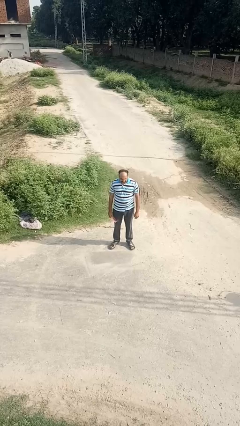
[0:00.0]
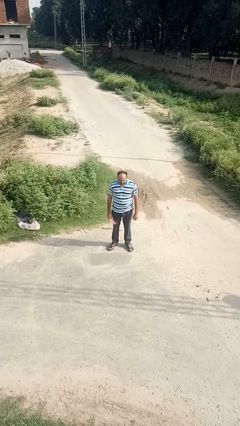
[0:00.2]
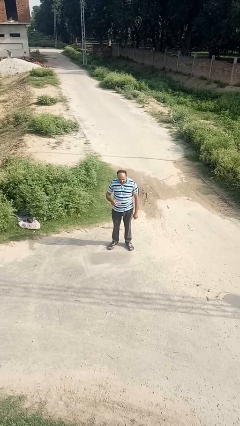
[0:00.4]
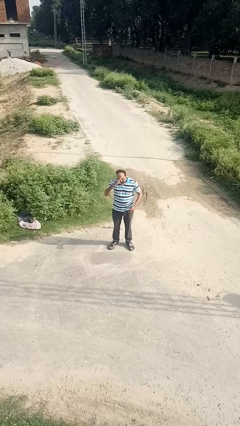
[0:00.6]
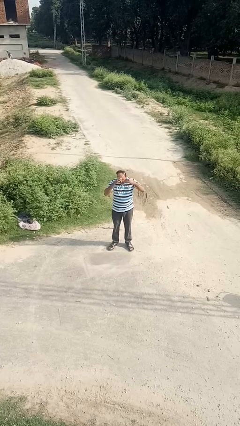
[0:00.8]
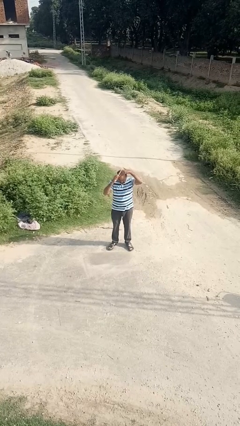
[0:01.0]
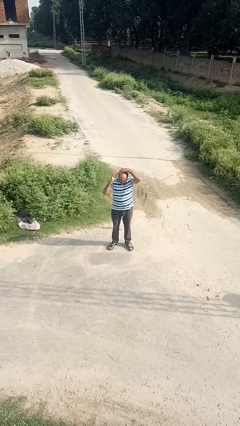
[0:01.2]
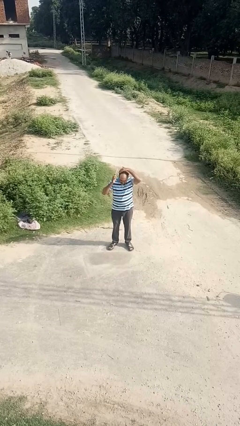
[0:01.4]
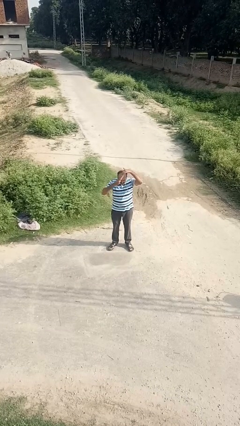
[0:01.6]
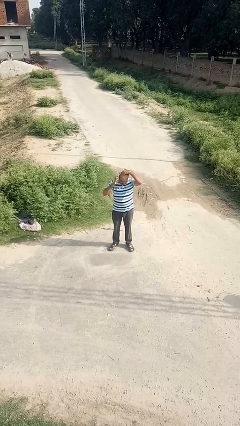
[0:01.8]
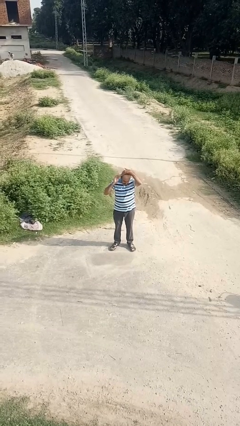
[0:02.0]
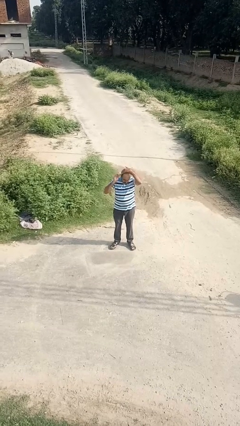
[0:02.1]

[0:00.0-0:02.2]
person brushes hair

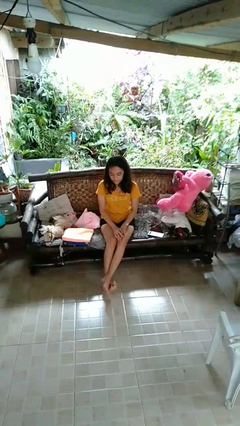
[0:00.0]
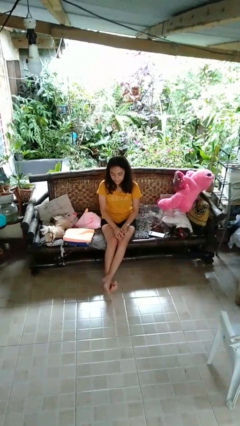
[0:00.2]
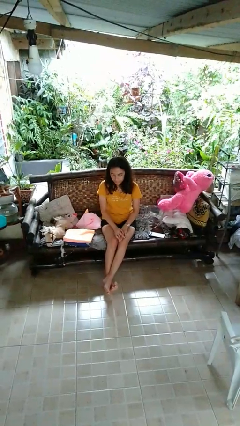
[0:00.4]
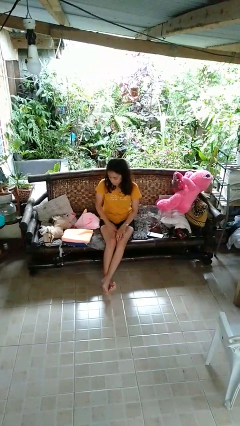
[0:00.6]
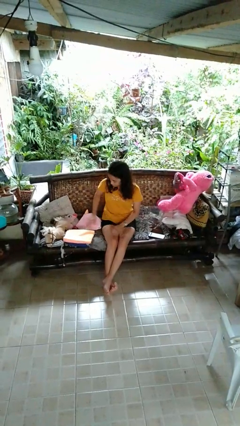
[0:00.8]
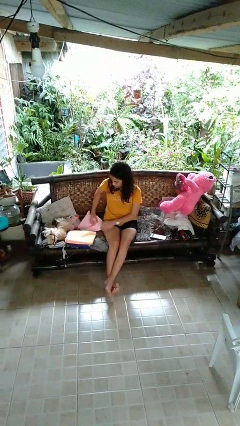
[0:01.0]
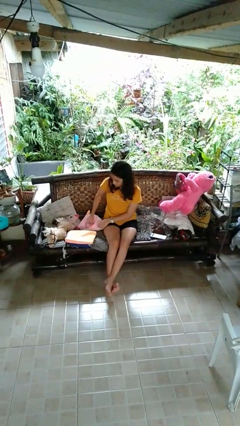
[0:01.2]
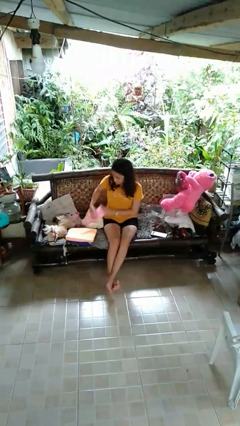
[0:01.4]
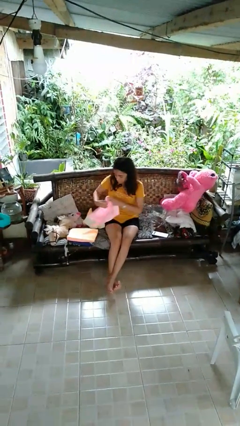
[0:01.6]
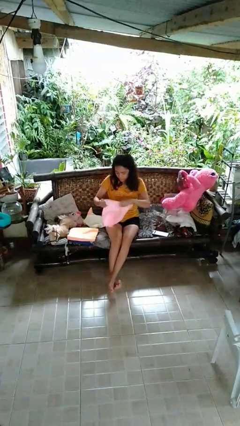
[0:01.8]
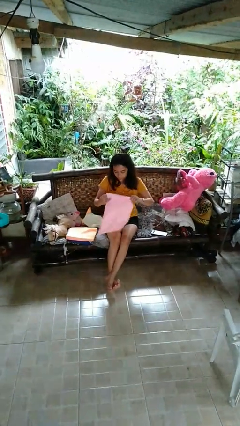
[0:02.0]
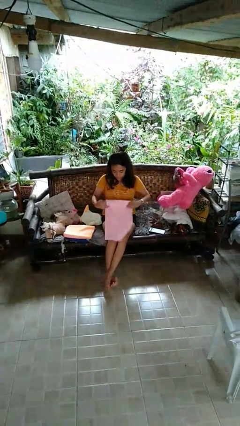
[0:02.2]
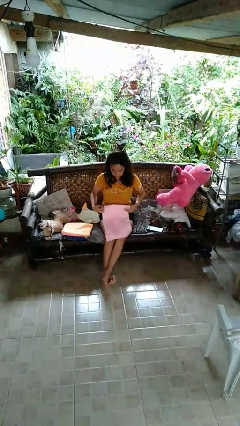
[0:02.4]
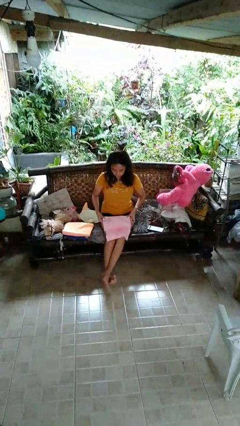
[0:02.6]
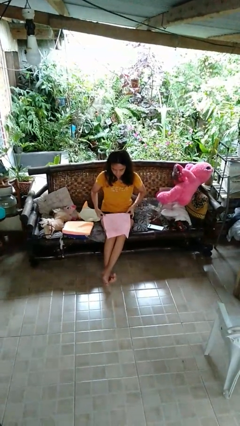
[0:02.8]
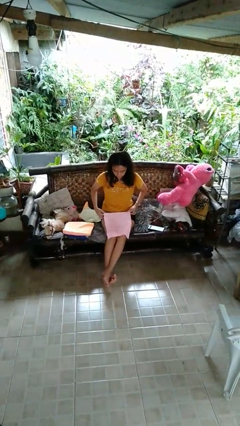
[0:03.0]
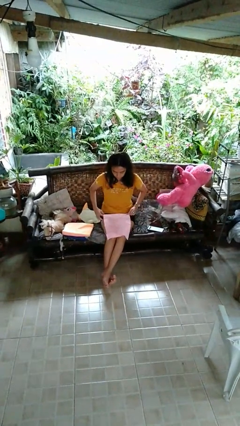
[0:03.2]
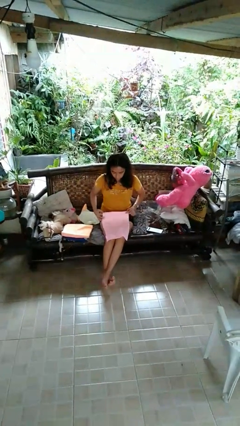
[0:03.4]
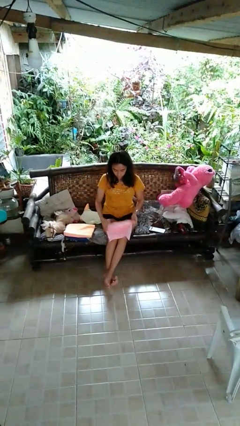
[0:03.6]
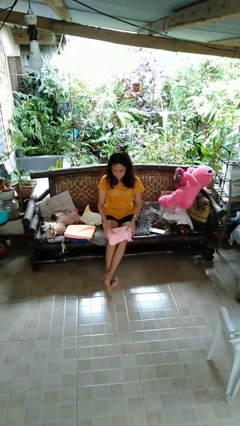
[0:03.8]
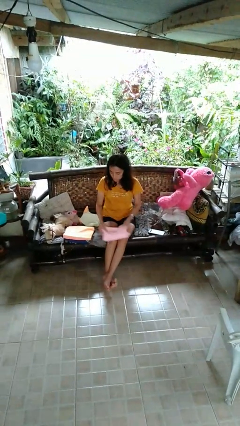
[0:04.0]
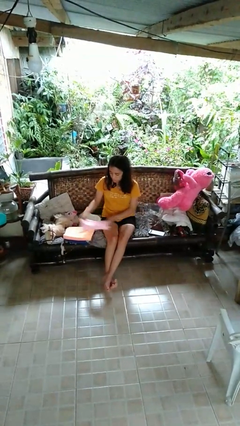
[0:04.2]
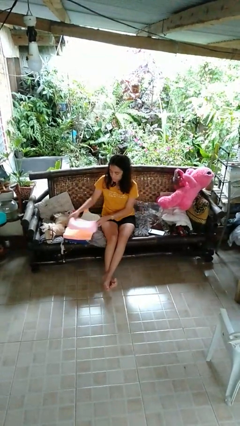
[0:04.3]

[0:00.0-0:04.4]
person folds towel

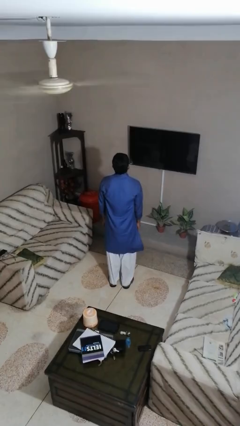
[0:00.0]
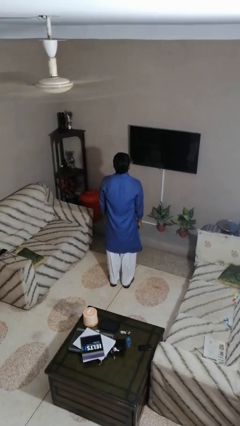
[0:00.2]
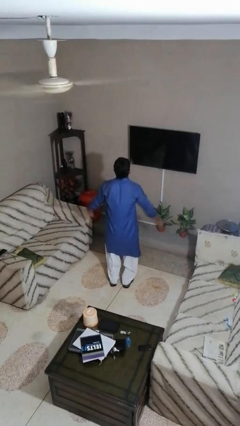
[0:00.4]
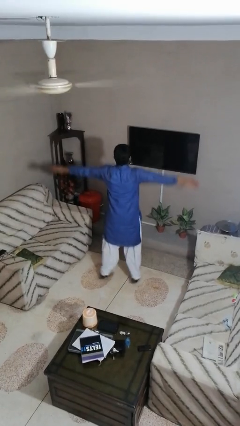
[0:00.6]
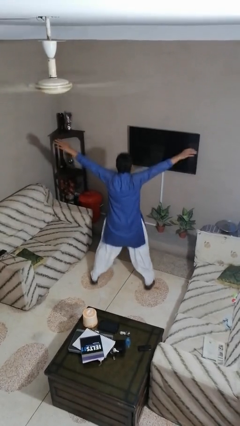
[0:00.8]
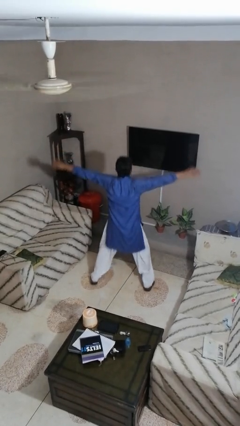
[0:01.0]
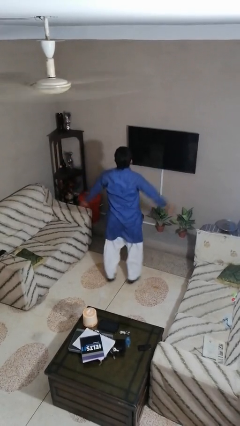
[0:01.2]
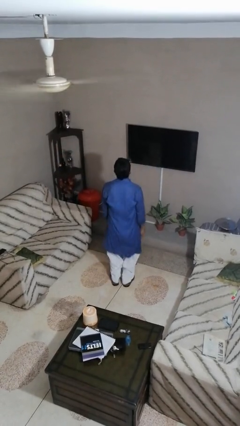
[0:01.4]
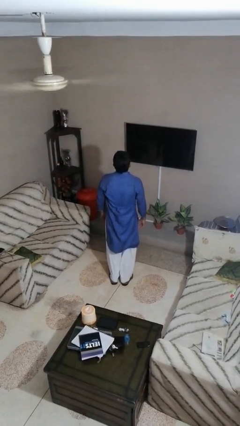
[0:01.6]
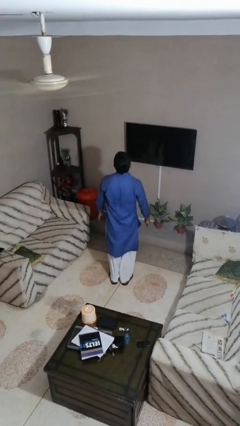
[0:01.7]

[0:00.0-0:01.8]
person exercises with jumping jacks

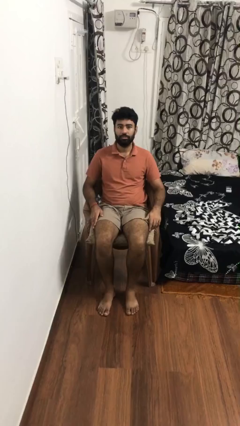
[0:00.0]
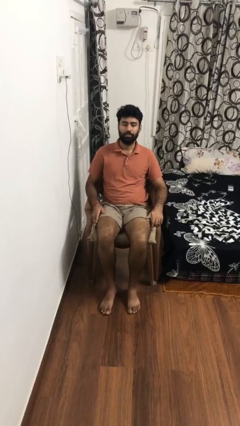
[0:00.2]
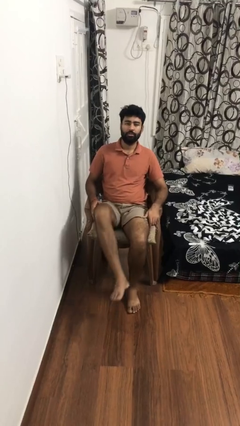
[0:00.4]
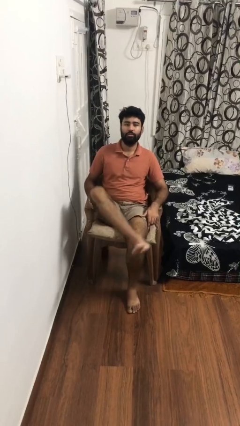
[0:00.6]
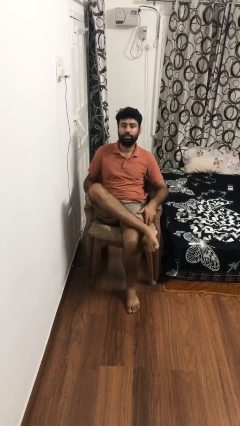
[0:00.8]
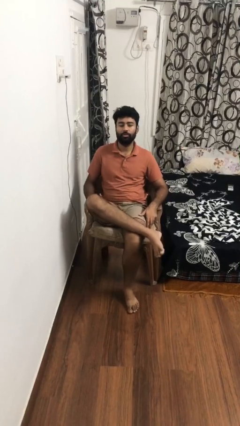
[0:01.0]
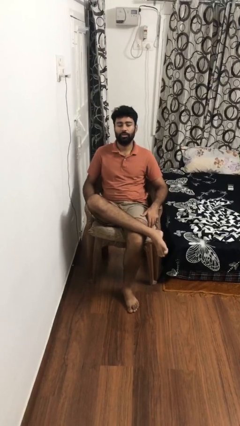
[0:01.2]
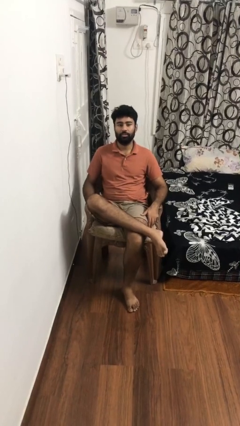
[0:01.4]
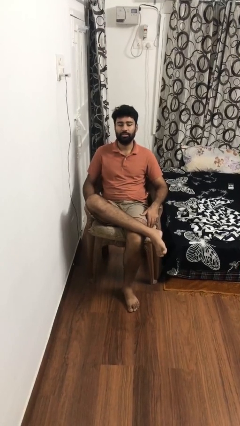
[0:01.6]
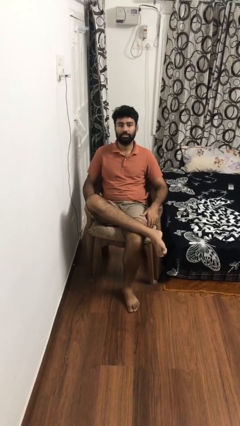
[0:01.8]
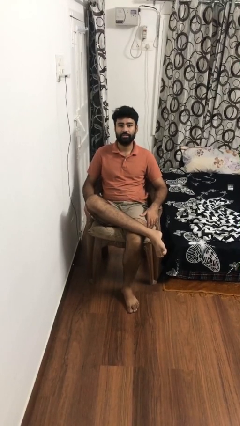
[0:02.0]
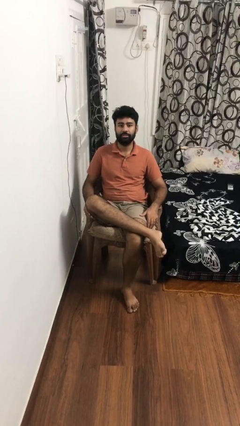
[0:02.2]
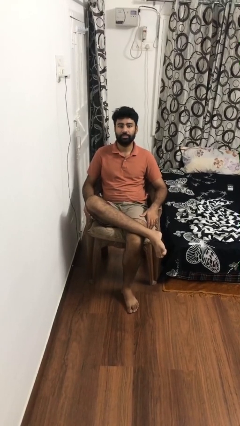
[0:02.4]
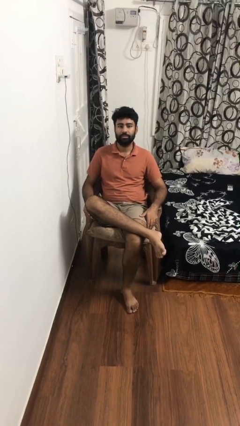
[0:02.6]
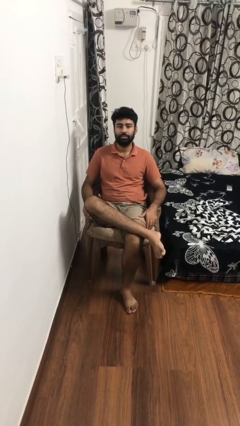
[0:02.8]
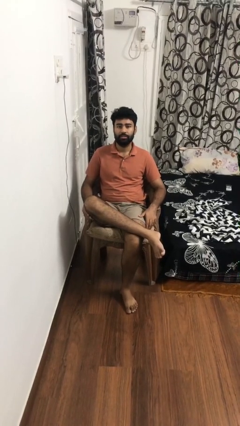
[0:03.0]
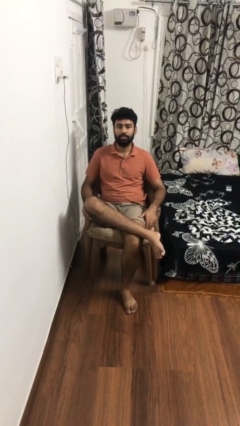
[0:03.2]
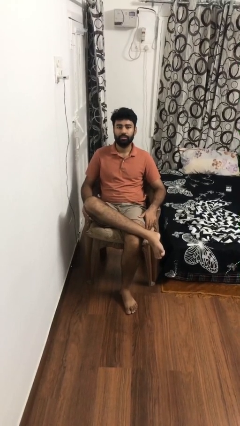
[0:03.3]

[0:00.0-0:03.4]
person crosses legs

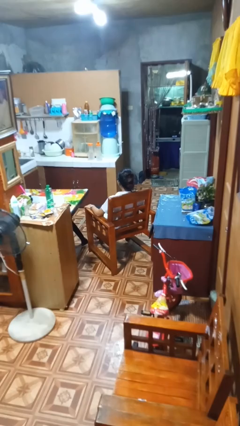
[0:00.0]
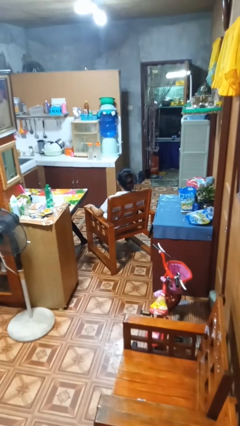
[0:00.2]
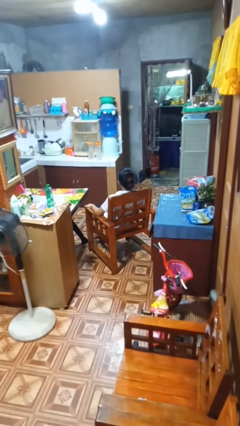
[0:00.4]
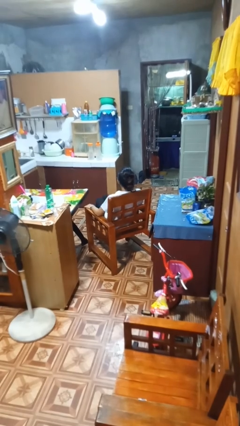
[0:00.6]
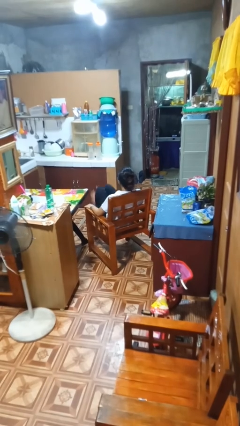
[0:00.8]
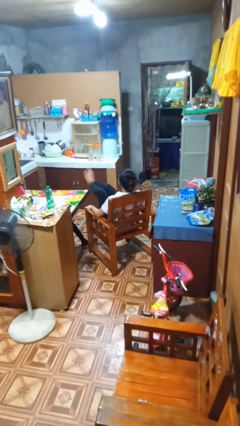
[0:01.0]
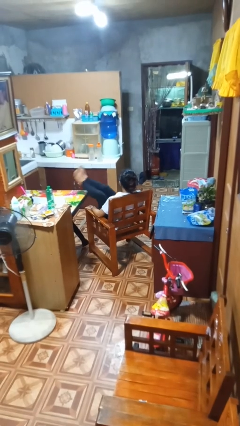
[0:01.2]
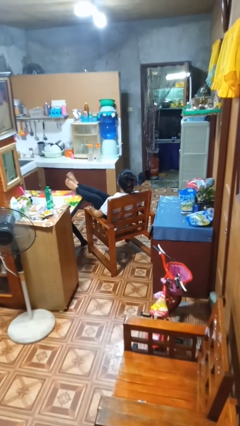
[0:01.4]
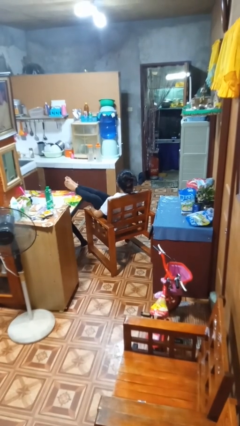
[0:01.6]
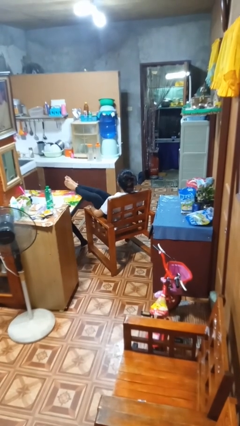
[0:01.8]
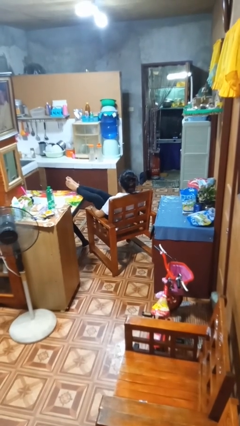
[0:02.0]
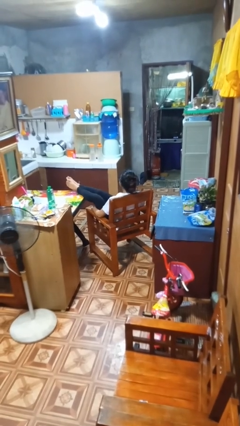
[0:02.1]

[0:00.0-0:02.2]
person puts feet up

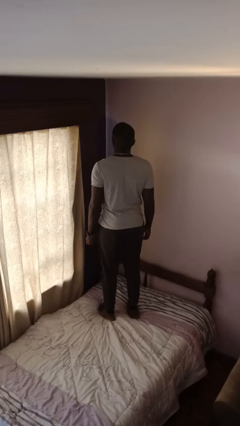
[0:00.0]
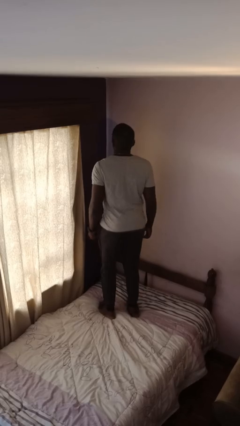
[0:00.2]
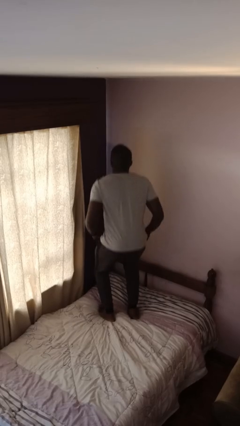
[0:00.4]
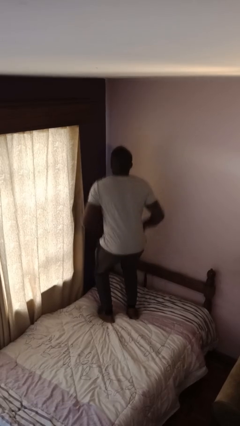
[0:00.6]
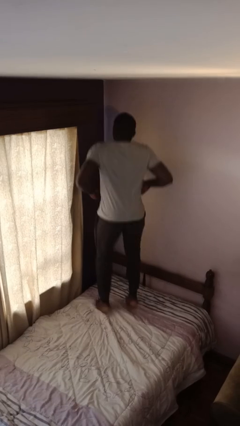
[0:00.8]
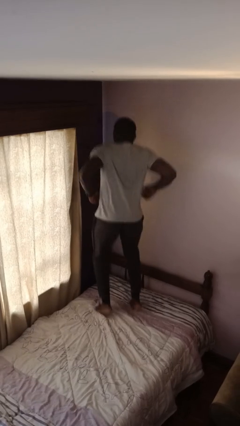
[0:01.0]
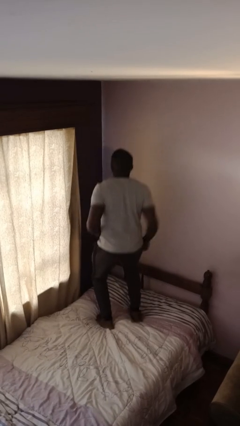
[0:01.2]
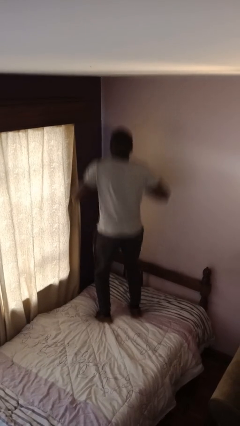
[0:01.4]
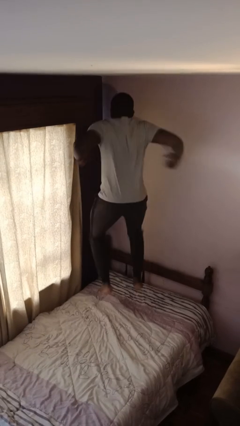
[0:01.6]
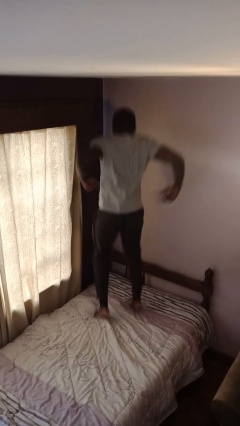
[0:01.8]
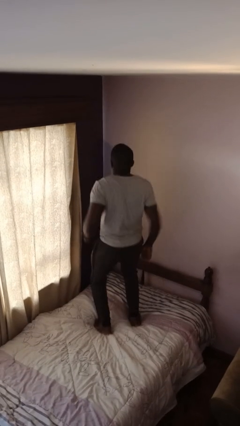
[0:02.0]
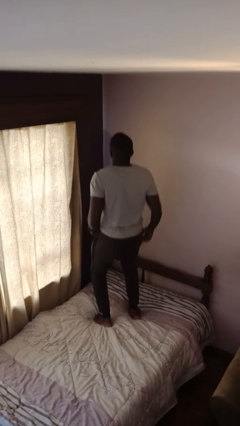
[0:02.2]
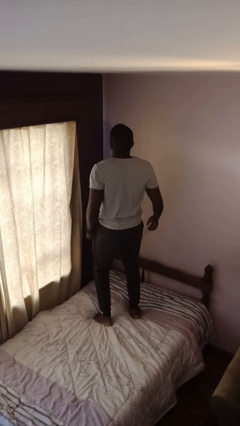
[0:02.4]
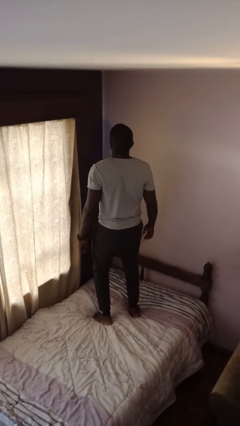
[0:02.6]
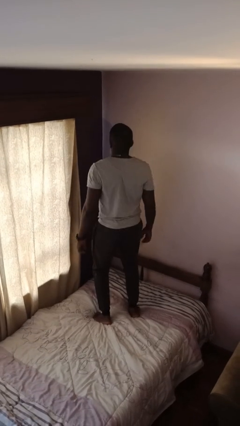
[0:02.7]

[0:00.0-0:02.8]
person jumps on bed

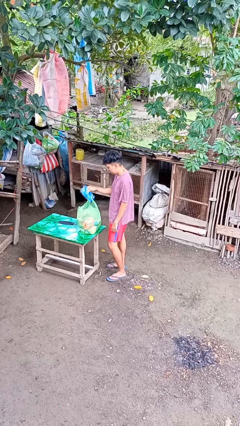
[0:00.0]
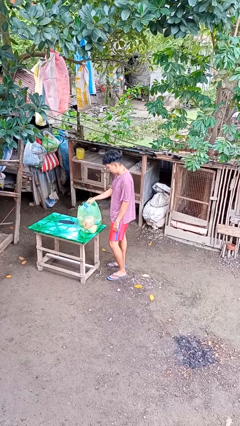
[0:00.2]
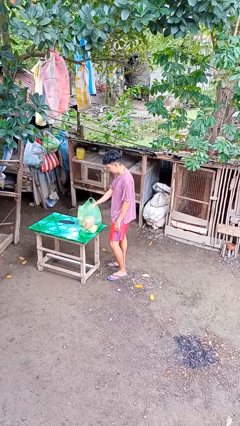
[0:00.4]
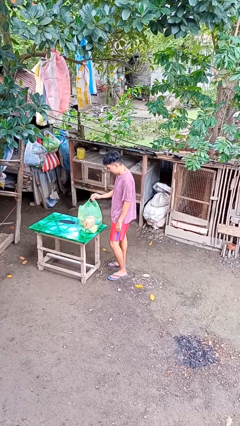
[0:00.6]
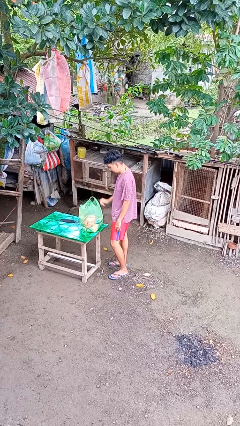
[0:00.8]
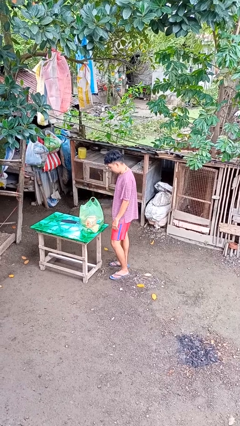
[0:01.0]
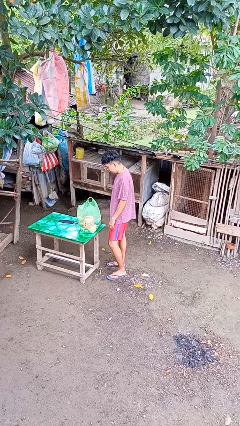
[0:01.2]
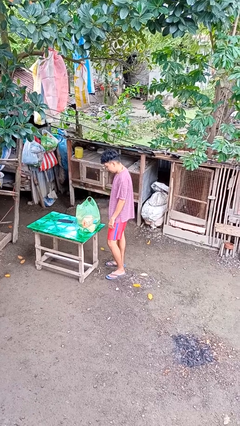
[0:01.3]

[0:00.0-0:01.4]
person puts object into bag
